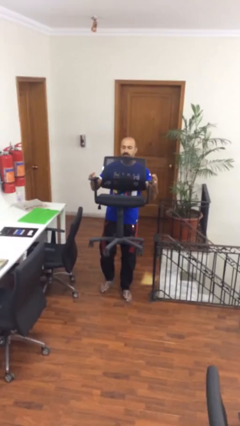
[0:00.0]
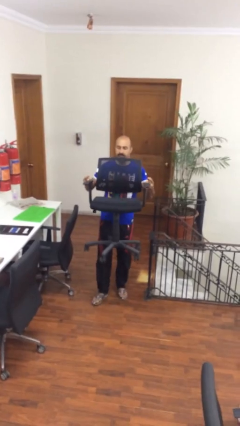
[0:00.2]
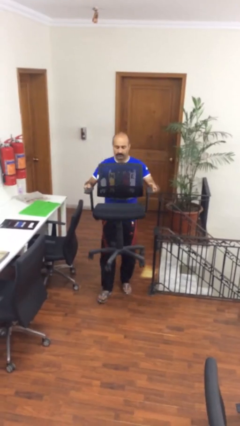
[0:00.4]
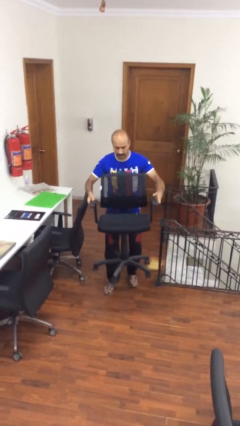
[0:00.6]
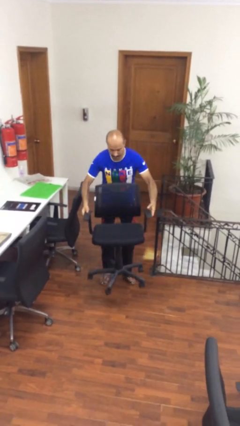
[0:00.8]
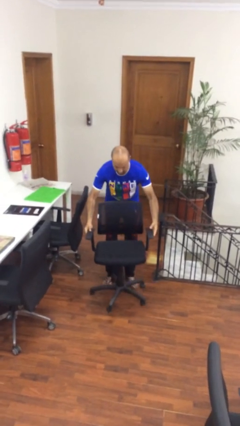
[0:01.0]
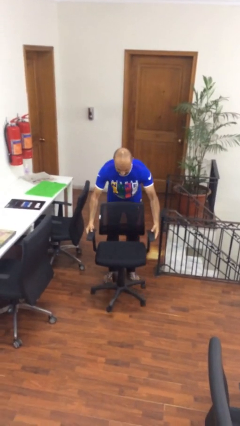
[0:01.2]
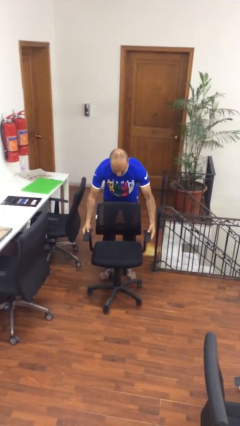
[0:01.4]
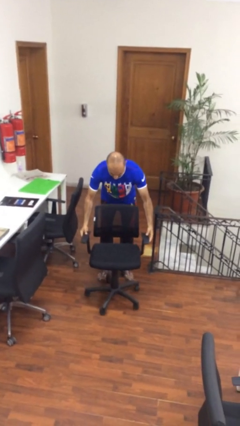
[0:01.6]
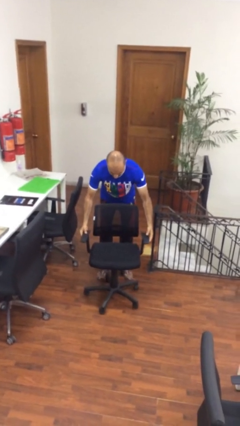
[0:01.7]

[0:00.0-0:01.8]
person puts down object on floor

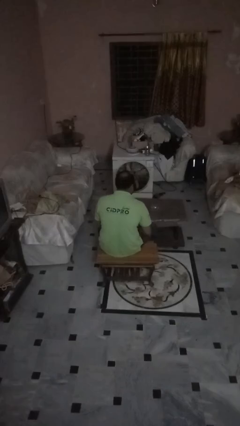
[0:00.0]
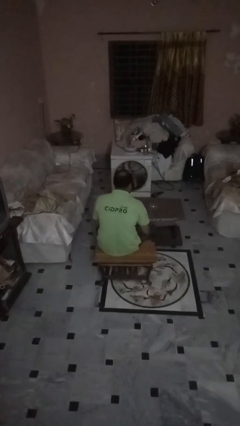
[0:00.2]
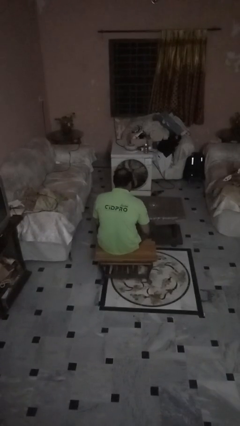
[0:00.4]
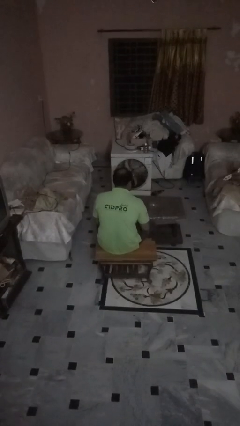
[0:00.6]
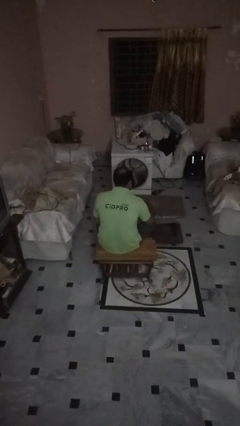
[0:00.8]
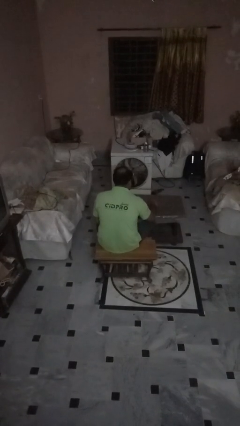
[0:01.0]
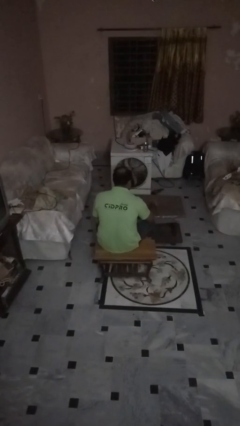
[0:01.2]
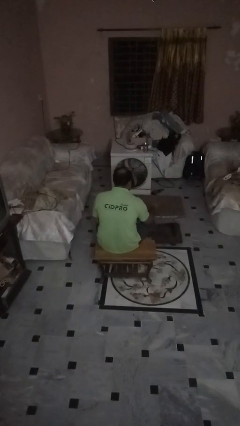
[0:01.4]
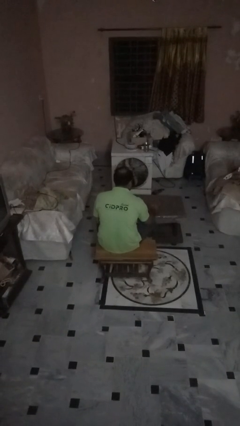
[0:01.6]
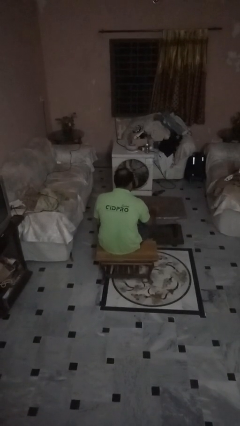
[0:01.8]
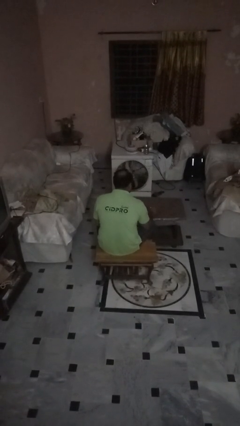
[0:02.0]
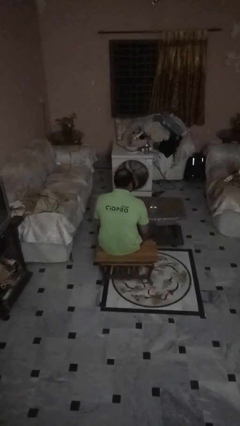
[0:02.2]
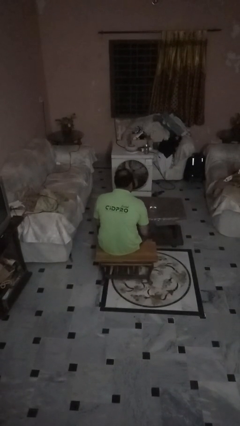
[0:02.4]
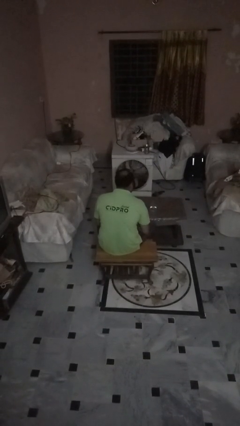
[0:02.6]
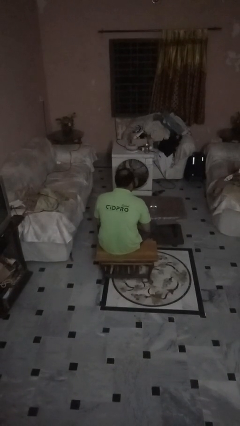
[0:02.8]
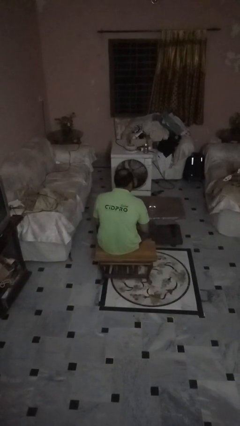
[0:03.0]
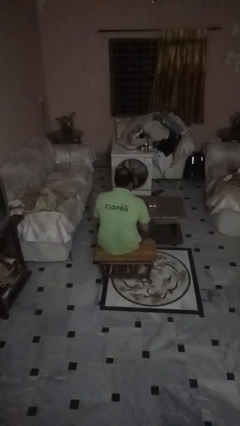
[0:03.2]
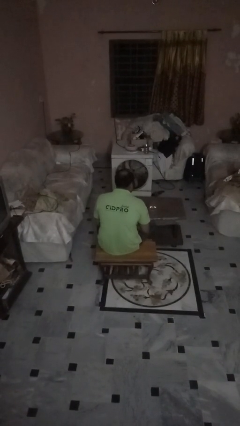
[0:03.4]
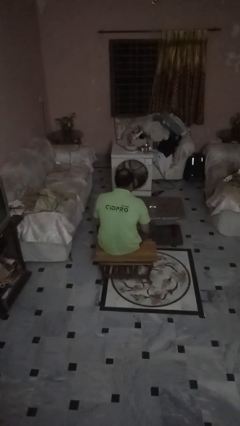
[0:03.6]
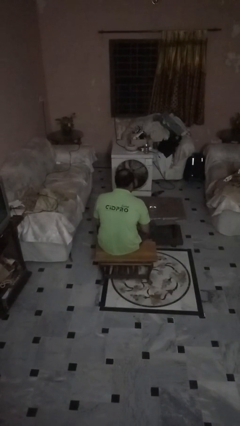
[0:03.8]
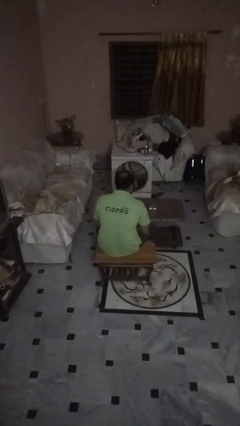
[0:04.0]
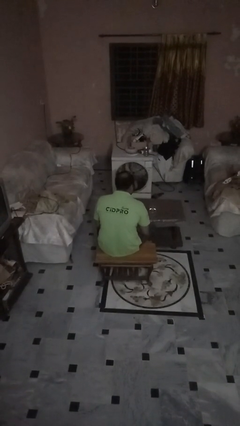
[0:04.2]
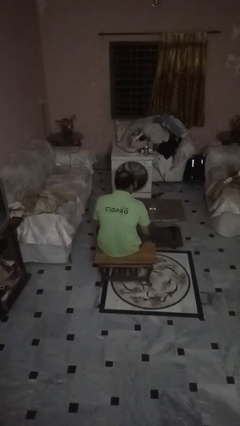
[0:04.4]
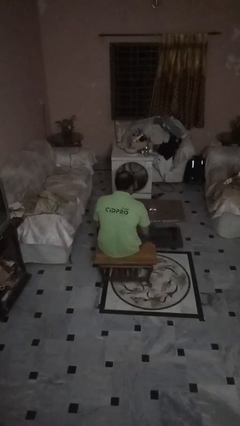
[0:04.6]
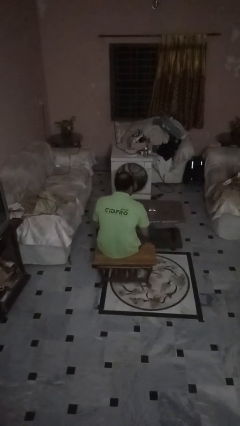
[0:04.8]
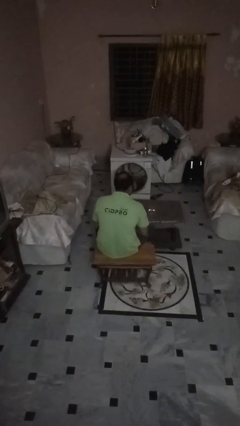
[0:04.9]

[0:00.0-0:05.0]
person sets upright glass

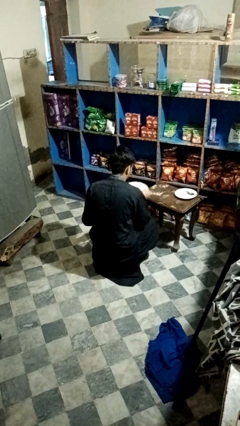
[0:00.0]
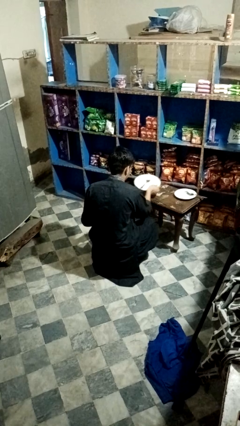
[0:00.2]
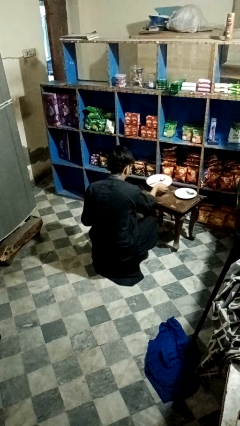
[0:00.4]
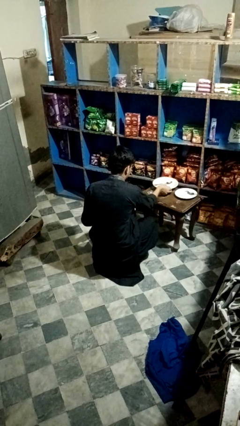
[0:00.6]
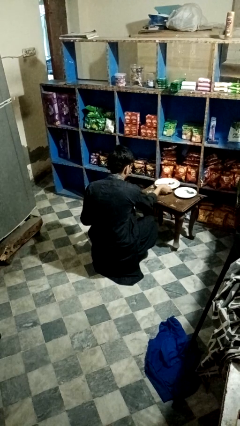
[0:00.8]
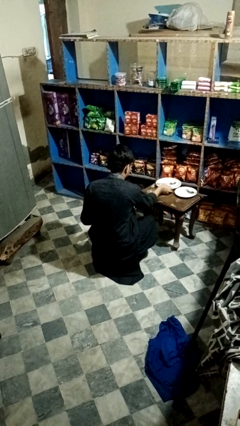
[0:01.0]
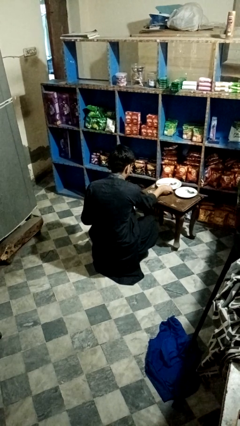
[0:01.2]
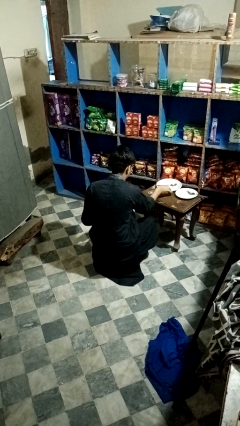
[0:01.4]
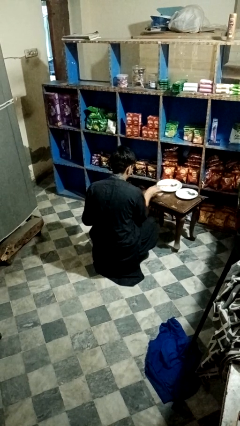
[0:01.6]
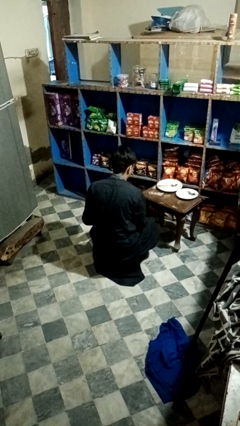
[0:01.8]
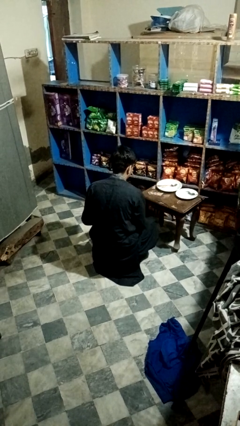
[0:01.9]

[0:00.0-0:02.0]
person sets table

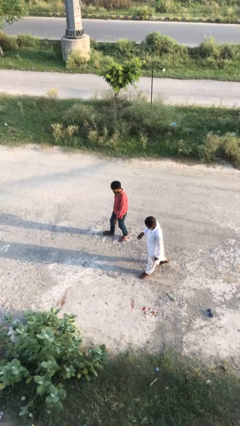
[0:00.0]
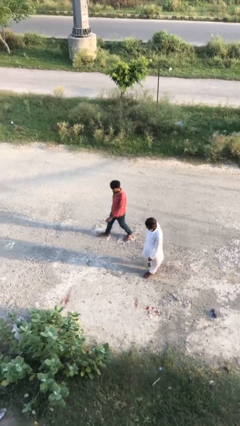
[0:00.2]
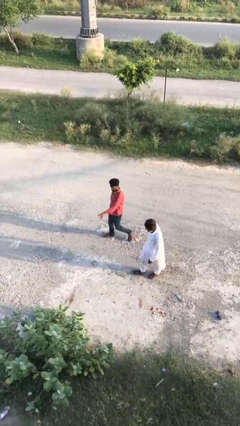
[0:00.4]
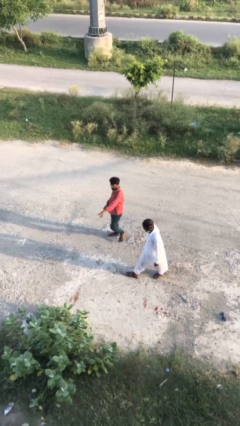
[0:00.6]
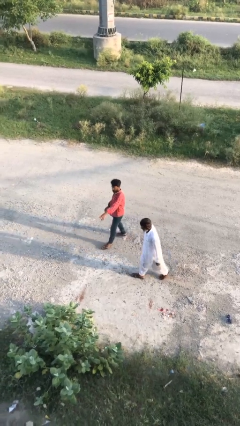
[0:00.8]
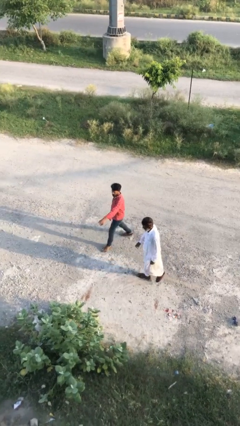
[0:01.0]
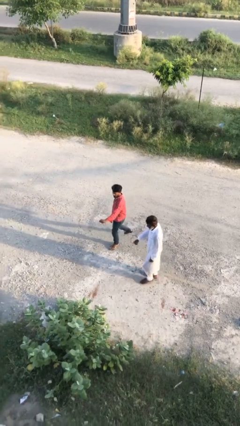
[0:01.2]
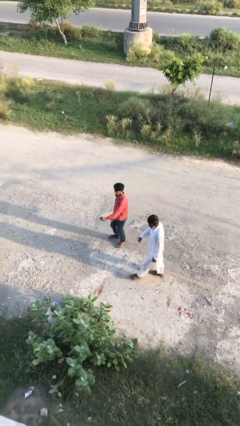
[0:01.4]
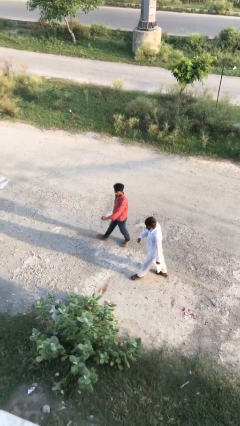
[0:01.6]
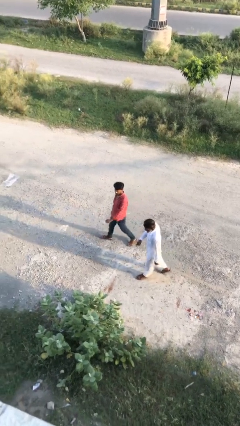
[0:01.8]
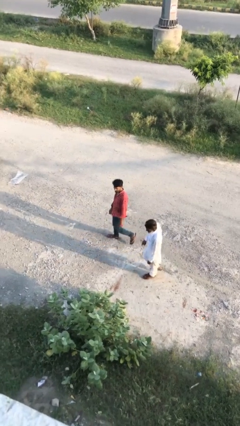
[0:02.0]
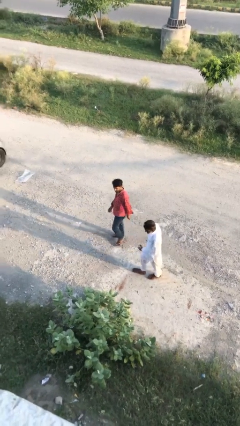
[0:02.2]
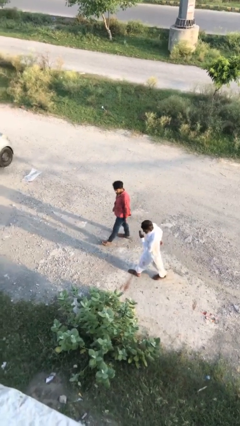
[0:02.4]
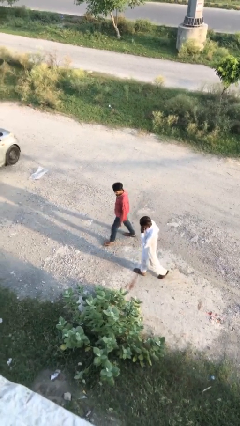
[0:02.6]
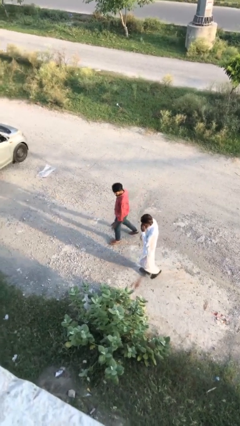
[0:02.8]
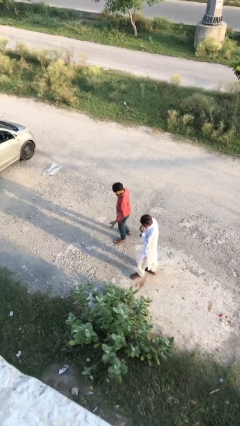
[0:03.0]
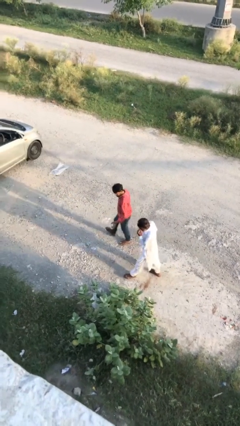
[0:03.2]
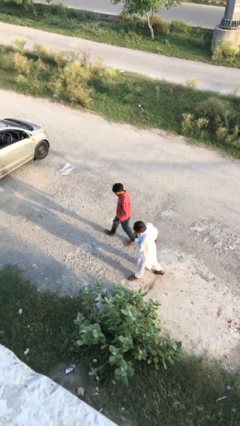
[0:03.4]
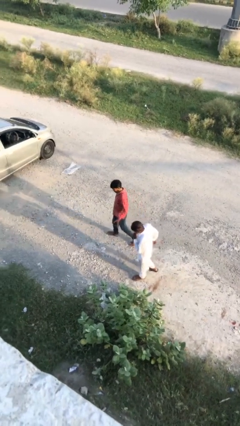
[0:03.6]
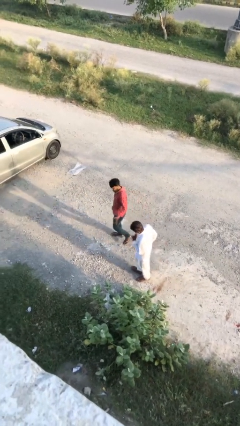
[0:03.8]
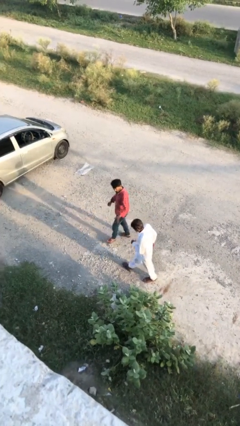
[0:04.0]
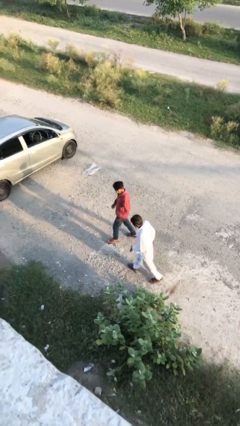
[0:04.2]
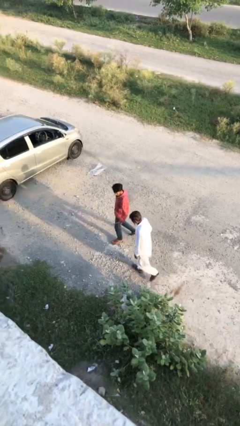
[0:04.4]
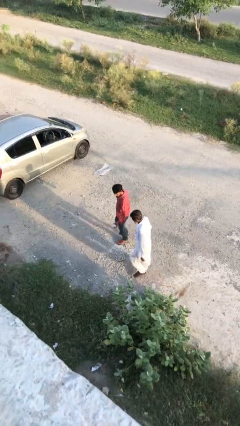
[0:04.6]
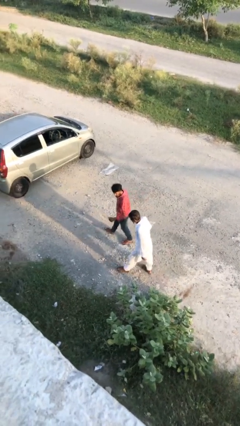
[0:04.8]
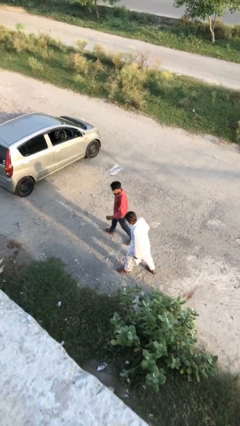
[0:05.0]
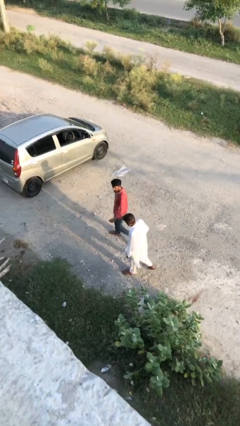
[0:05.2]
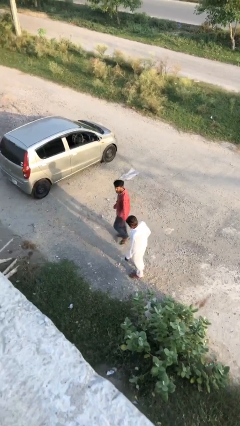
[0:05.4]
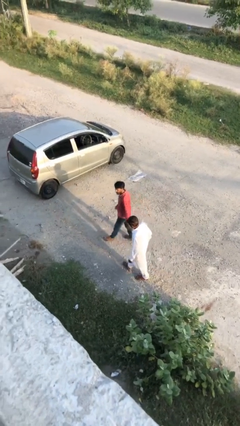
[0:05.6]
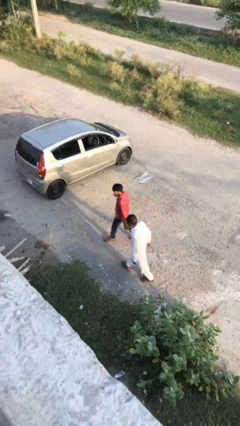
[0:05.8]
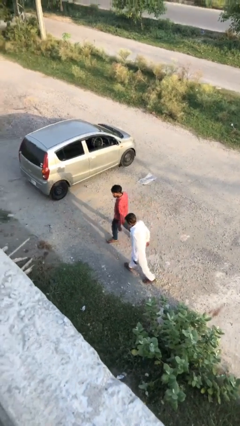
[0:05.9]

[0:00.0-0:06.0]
person talks to person

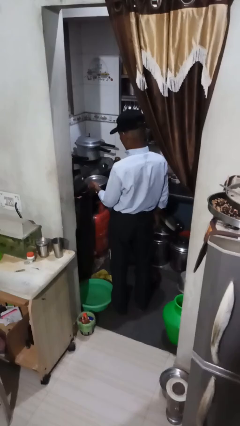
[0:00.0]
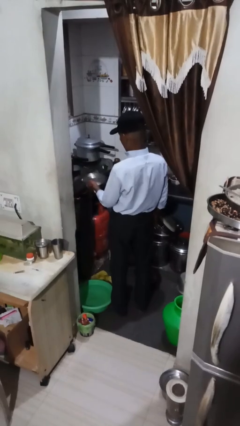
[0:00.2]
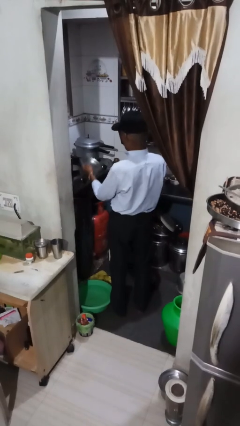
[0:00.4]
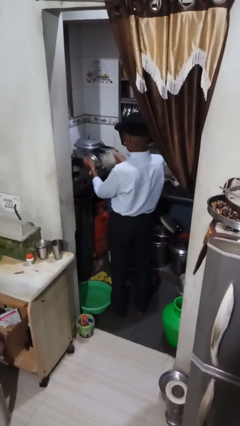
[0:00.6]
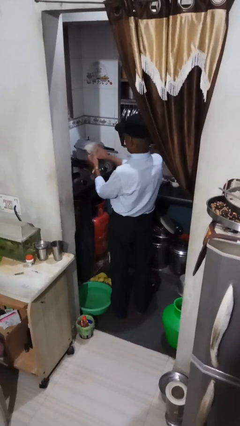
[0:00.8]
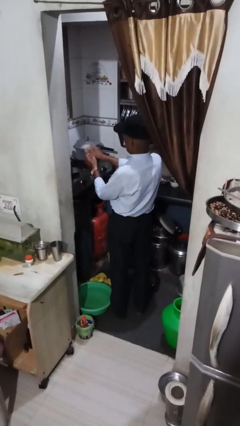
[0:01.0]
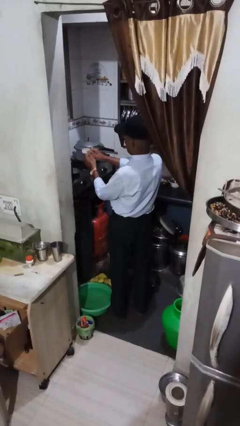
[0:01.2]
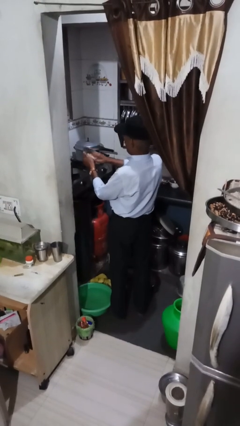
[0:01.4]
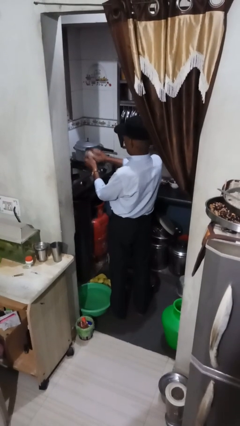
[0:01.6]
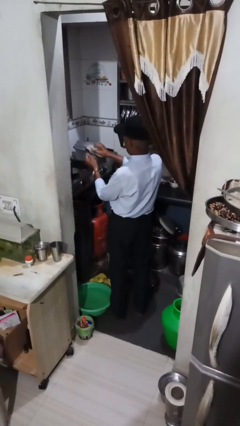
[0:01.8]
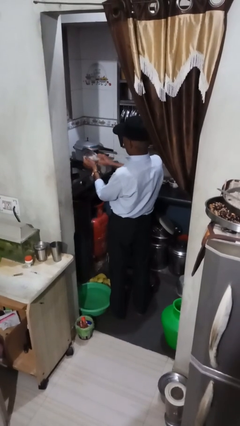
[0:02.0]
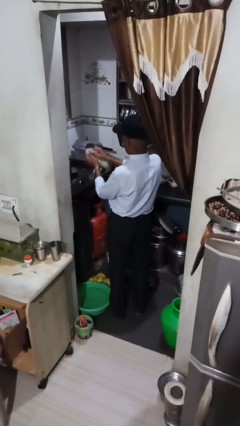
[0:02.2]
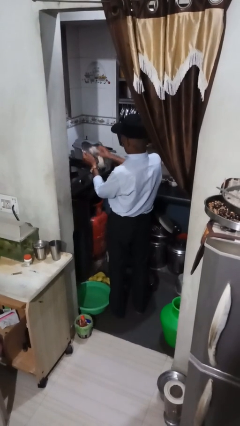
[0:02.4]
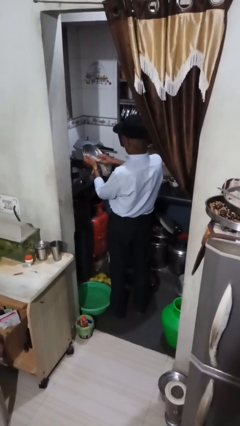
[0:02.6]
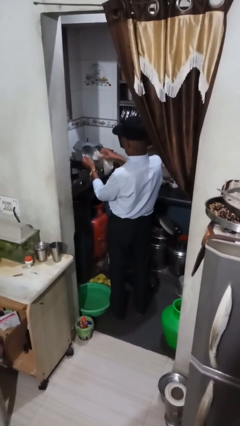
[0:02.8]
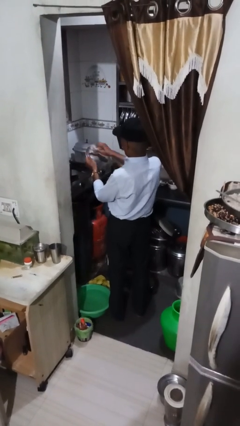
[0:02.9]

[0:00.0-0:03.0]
person dries dish
